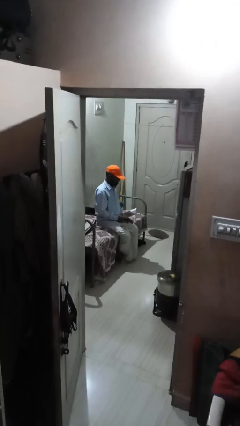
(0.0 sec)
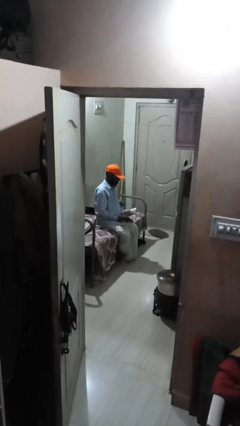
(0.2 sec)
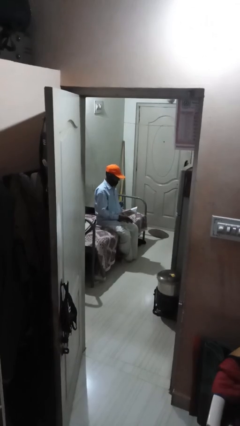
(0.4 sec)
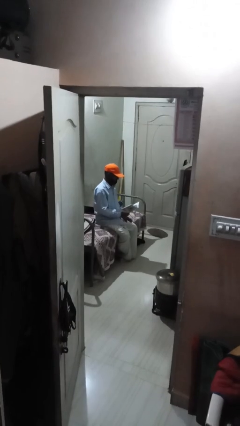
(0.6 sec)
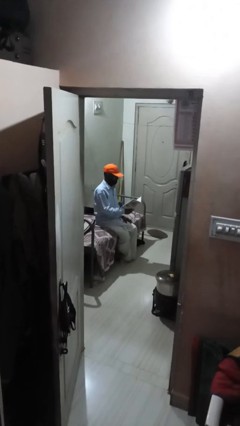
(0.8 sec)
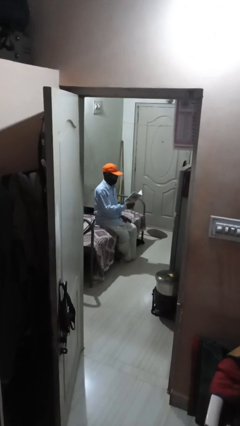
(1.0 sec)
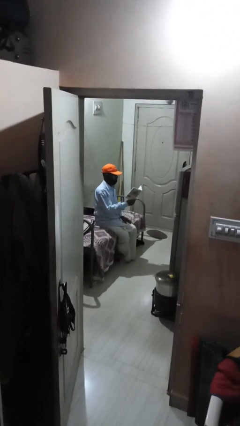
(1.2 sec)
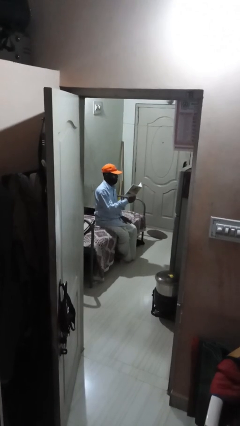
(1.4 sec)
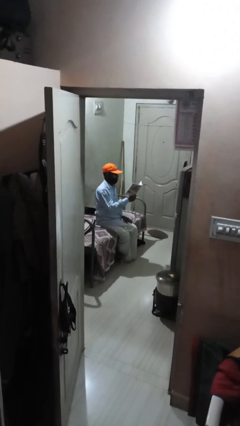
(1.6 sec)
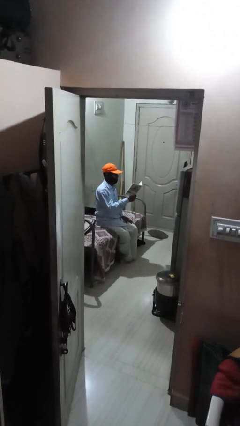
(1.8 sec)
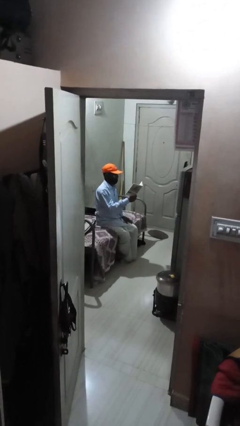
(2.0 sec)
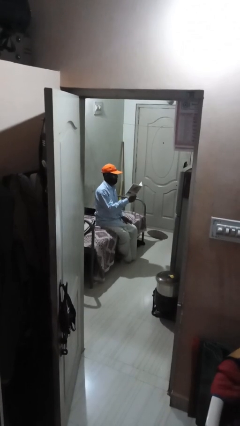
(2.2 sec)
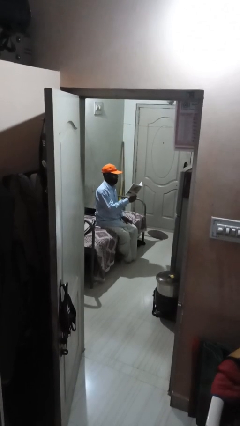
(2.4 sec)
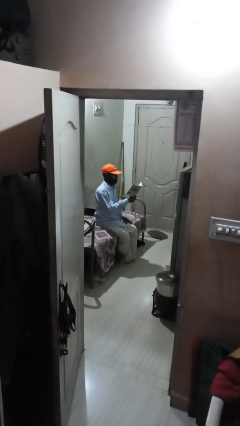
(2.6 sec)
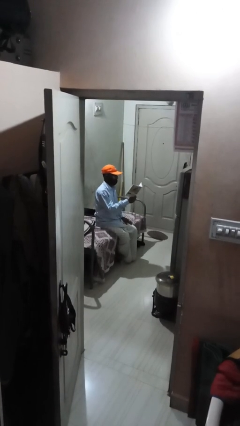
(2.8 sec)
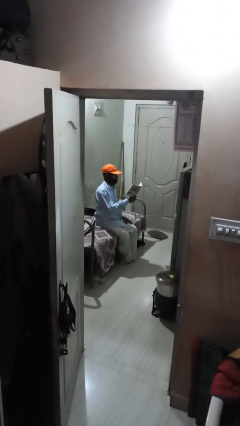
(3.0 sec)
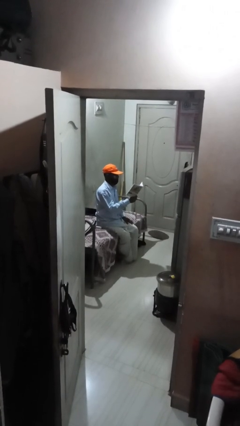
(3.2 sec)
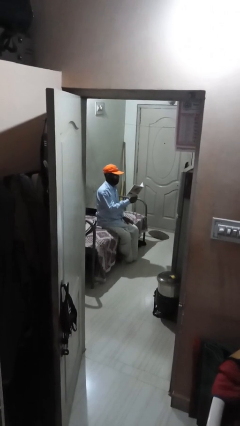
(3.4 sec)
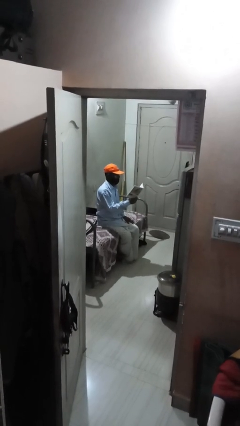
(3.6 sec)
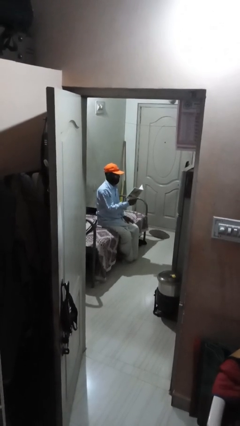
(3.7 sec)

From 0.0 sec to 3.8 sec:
person reads document

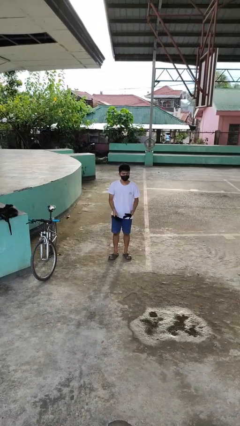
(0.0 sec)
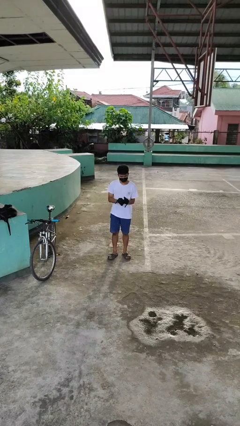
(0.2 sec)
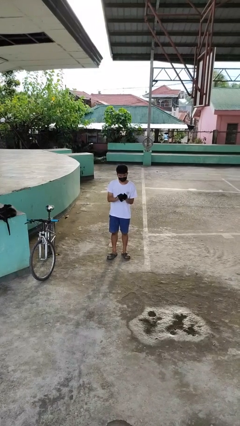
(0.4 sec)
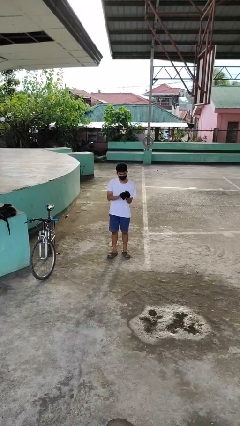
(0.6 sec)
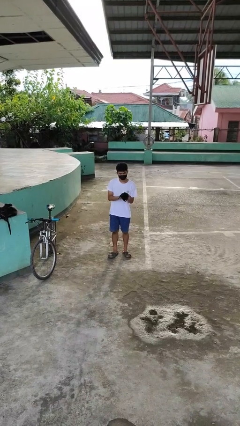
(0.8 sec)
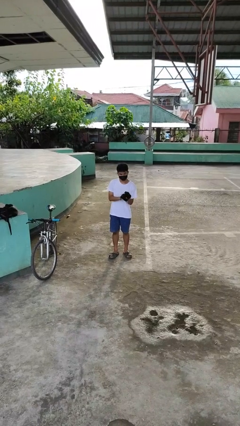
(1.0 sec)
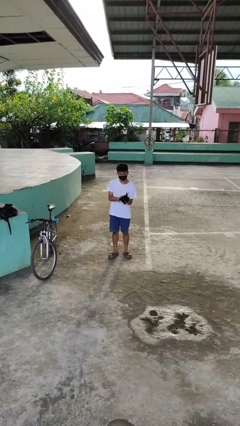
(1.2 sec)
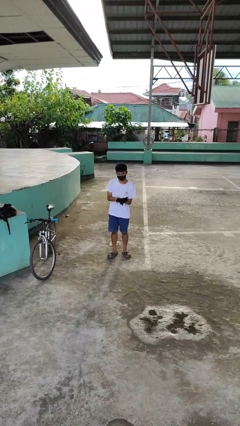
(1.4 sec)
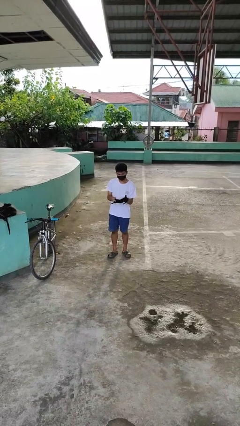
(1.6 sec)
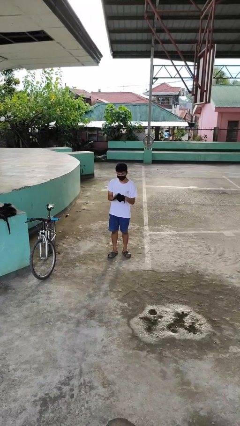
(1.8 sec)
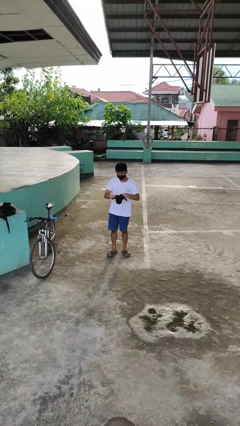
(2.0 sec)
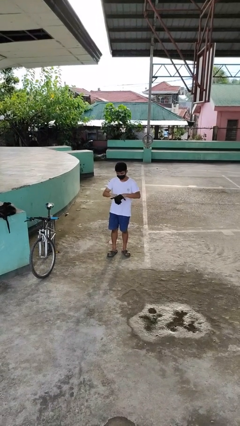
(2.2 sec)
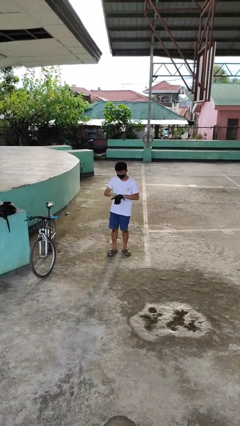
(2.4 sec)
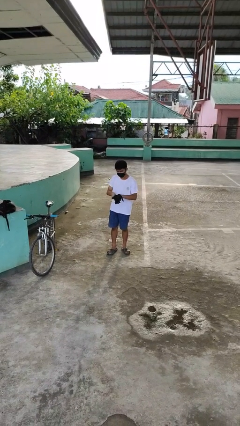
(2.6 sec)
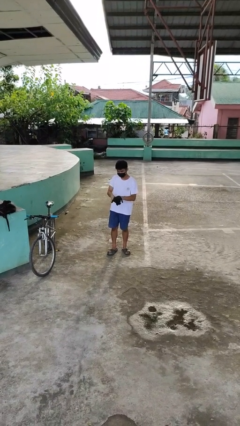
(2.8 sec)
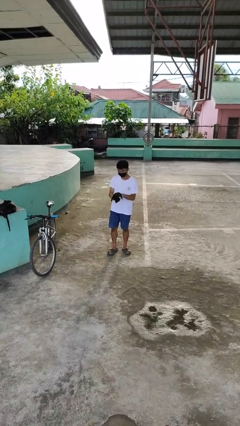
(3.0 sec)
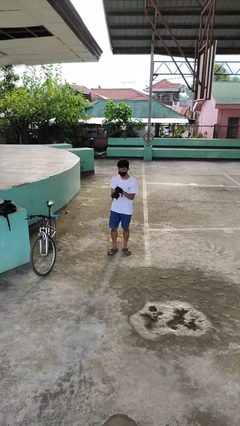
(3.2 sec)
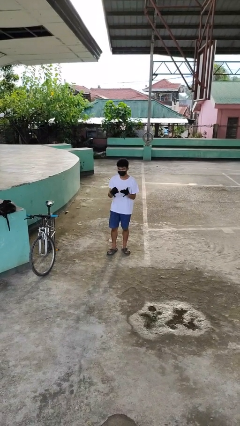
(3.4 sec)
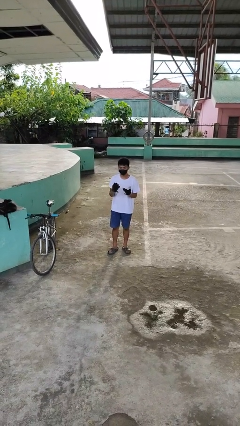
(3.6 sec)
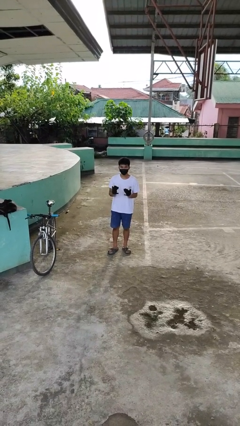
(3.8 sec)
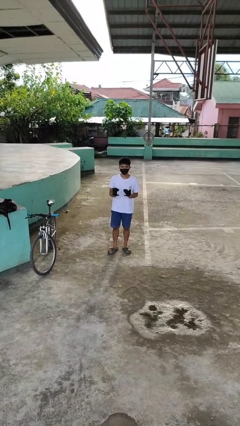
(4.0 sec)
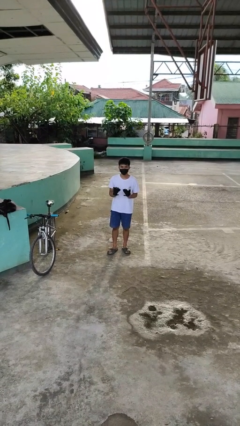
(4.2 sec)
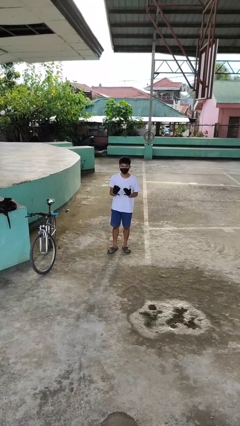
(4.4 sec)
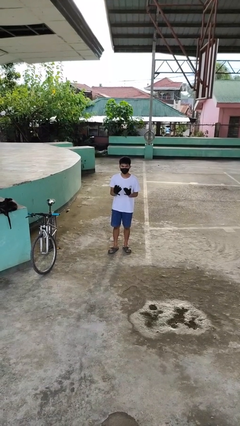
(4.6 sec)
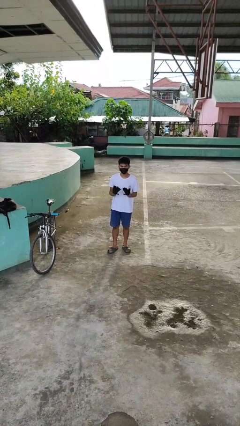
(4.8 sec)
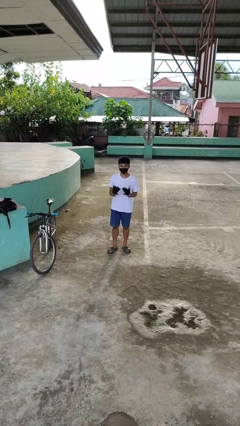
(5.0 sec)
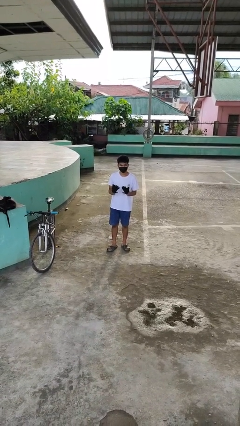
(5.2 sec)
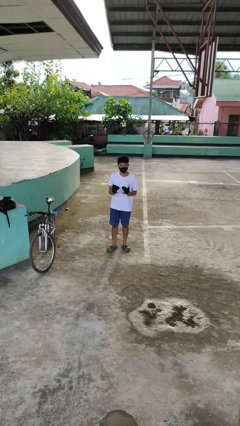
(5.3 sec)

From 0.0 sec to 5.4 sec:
person puts on gloves

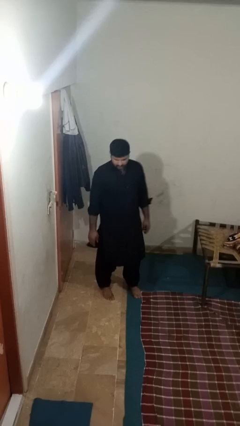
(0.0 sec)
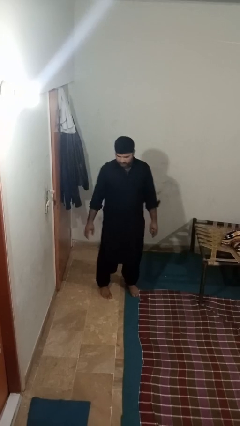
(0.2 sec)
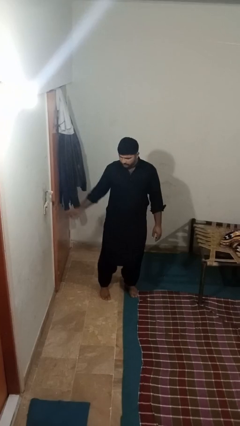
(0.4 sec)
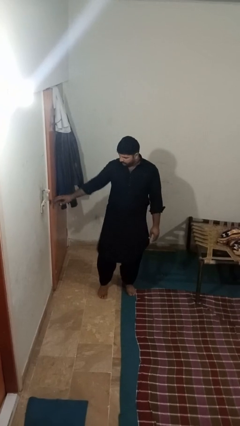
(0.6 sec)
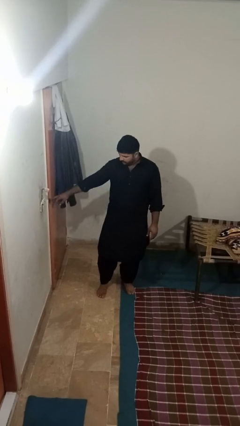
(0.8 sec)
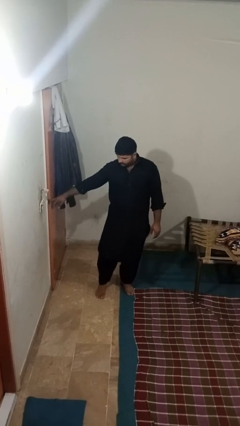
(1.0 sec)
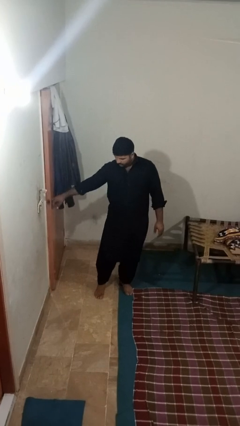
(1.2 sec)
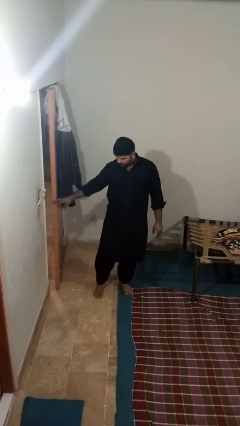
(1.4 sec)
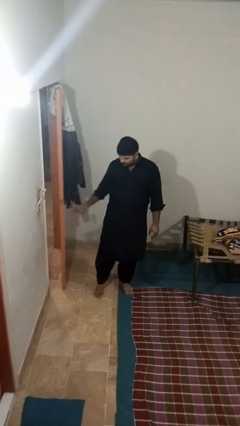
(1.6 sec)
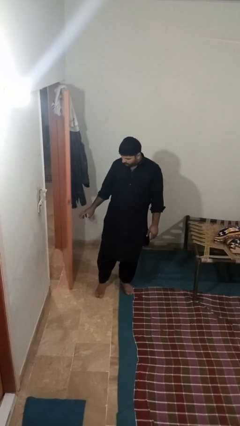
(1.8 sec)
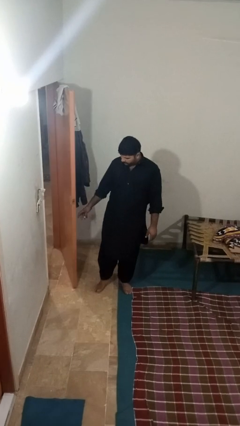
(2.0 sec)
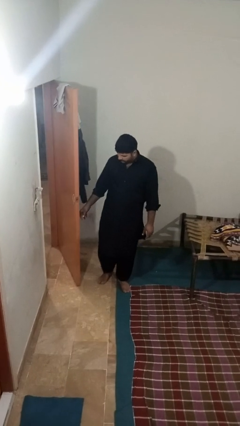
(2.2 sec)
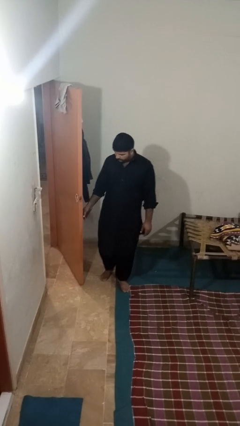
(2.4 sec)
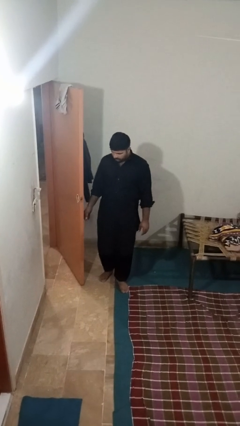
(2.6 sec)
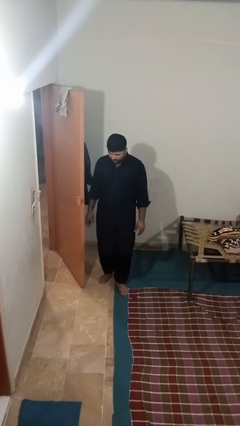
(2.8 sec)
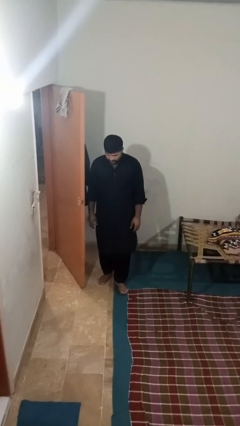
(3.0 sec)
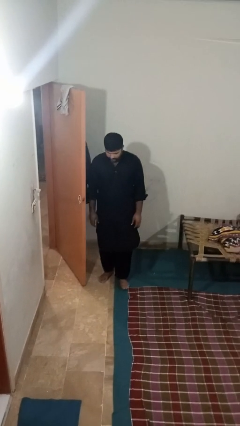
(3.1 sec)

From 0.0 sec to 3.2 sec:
person opens facility door

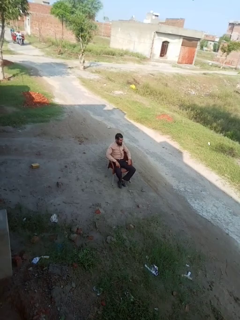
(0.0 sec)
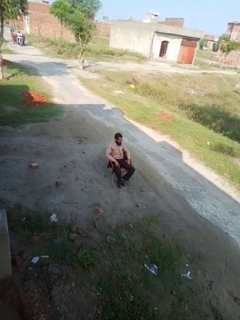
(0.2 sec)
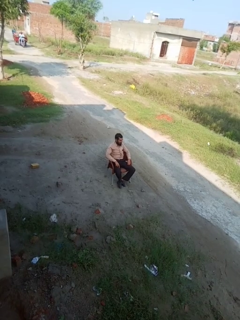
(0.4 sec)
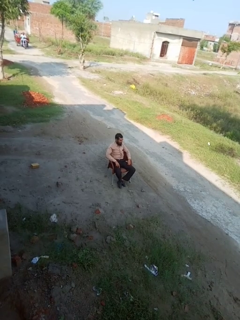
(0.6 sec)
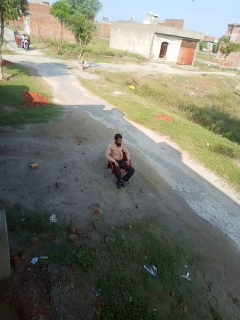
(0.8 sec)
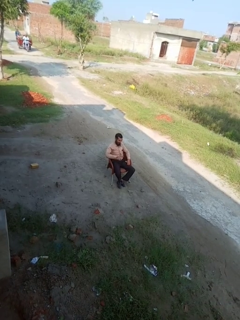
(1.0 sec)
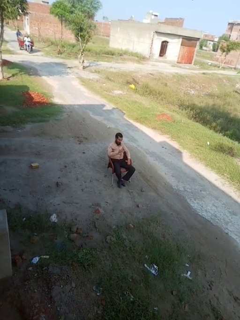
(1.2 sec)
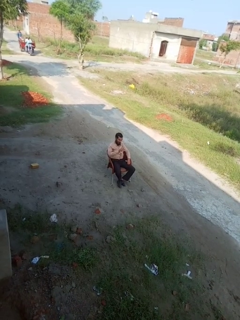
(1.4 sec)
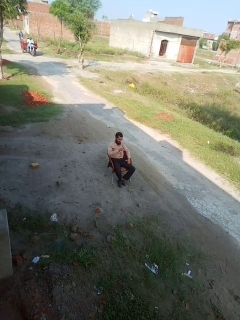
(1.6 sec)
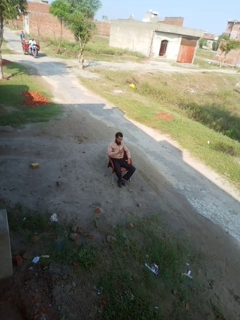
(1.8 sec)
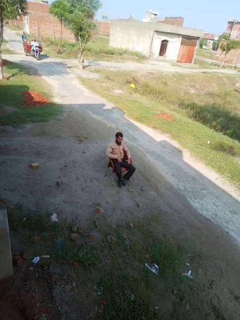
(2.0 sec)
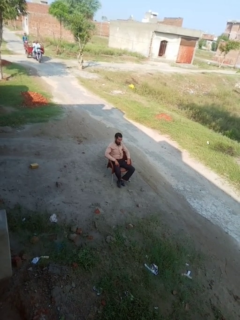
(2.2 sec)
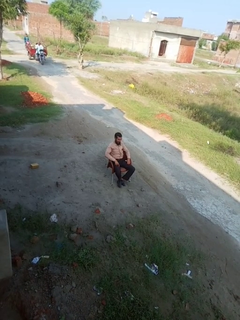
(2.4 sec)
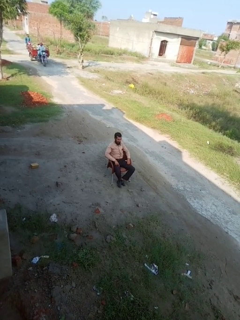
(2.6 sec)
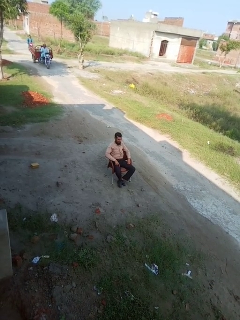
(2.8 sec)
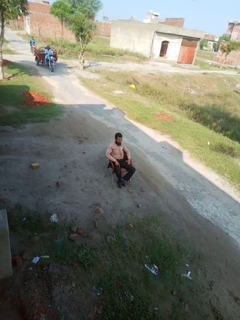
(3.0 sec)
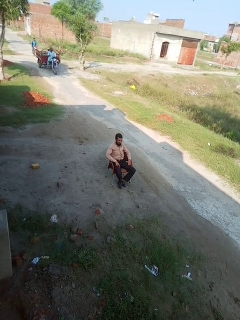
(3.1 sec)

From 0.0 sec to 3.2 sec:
person gestures number one

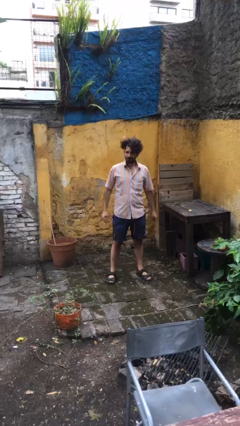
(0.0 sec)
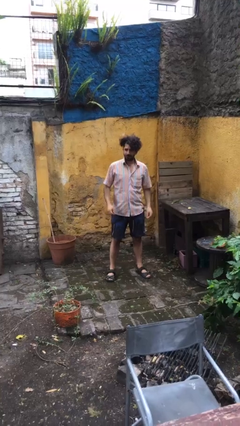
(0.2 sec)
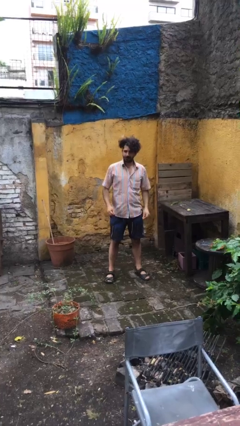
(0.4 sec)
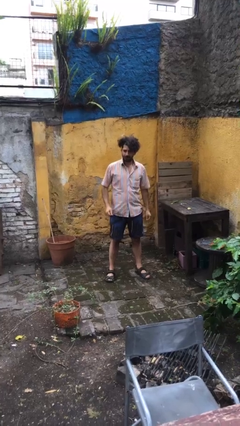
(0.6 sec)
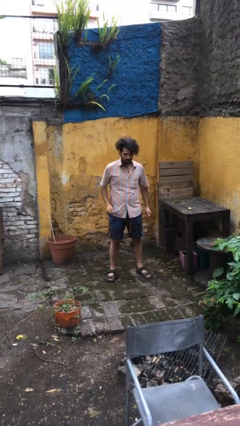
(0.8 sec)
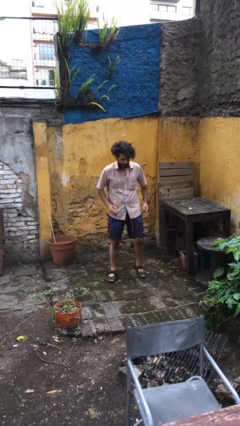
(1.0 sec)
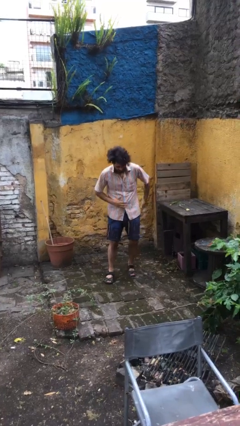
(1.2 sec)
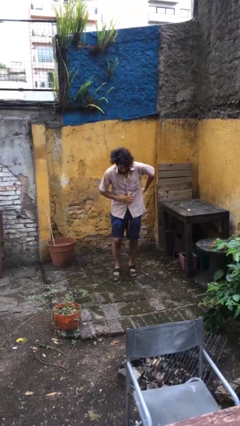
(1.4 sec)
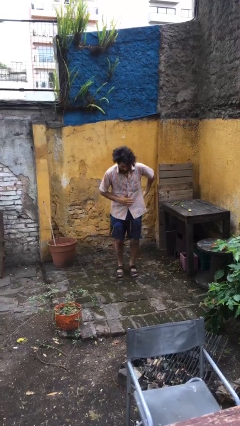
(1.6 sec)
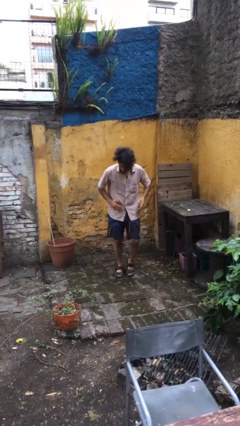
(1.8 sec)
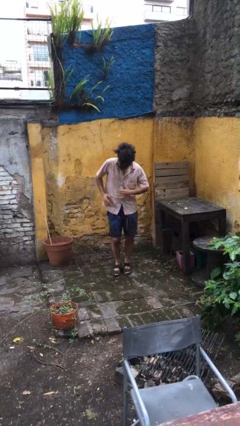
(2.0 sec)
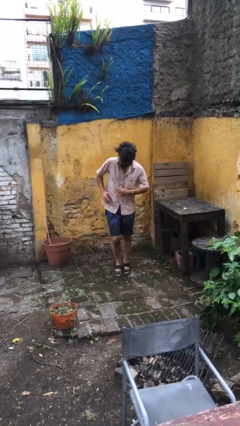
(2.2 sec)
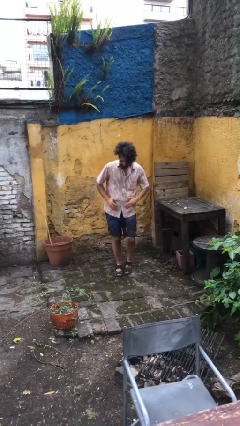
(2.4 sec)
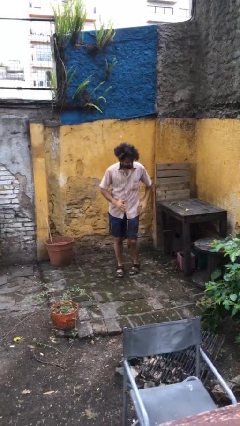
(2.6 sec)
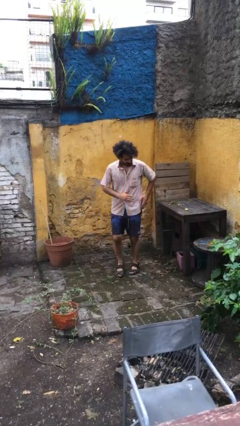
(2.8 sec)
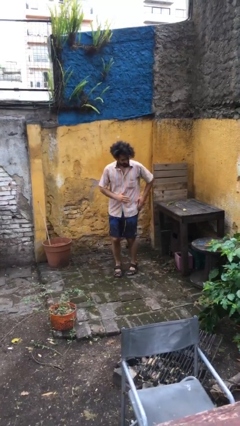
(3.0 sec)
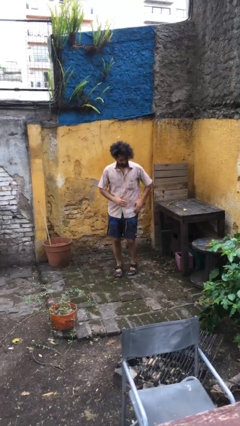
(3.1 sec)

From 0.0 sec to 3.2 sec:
person dances in place
